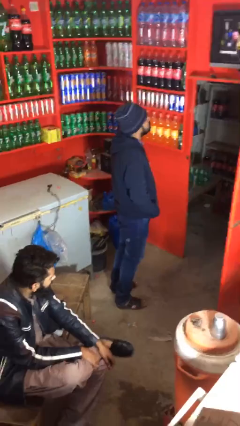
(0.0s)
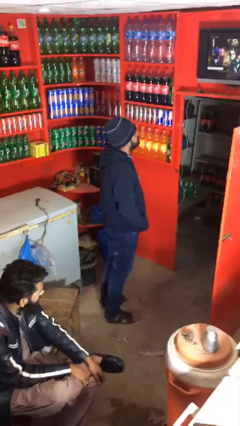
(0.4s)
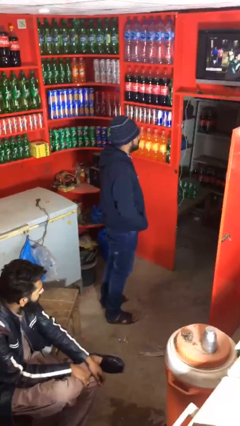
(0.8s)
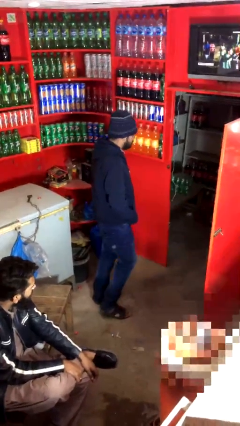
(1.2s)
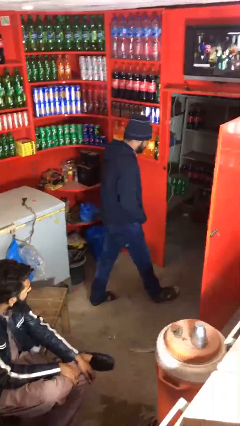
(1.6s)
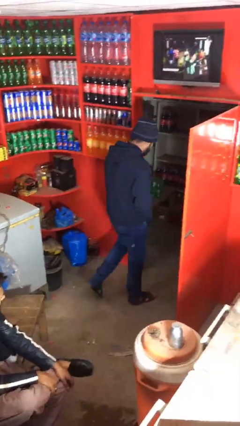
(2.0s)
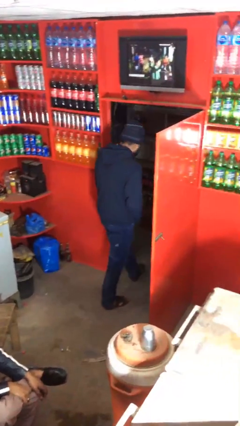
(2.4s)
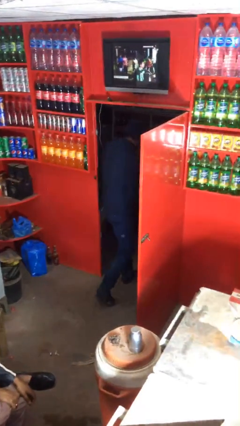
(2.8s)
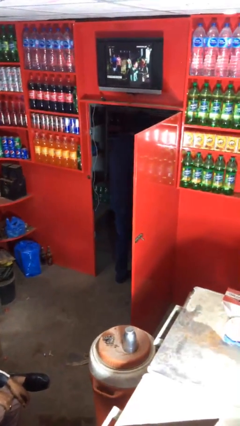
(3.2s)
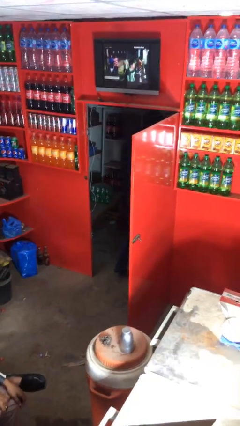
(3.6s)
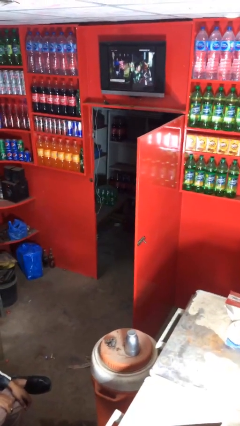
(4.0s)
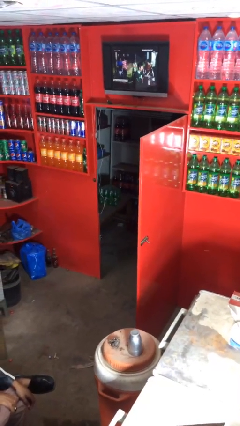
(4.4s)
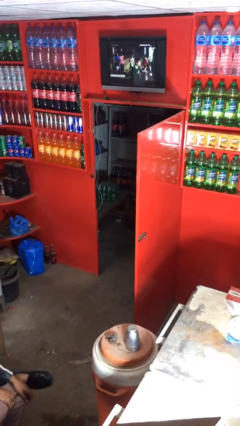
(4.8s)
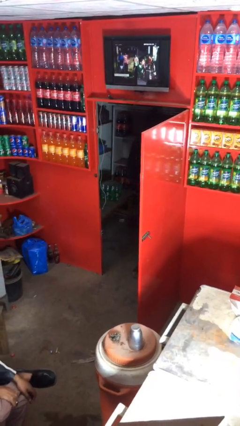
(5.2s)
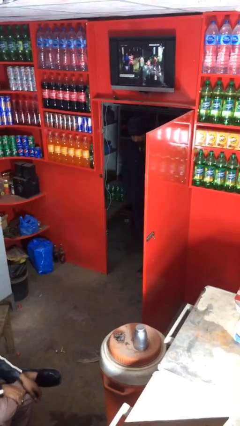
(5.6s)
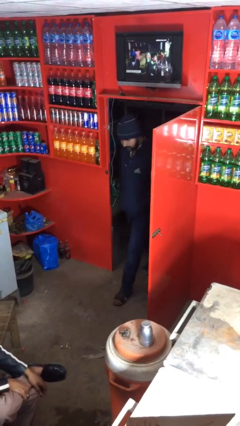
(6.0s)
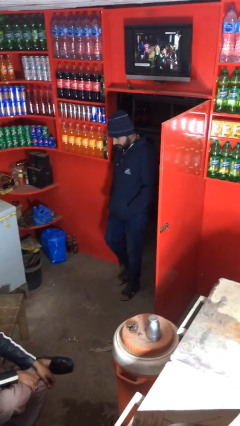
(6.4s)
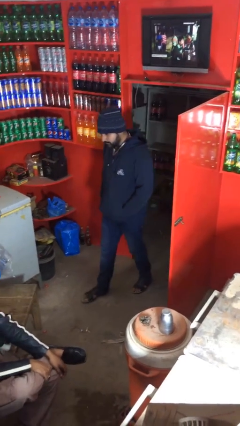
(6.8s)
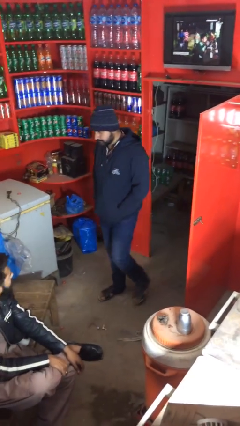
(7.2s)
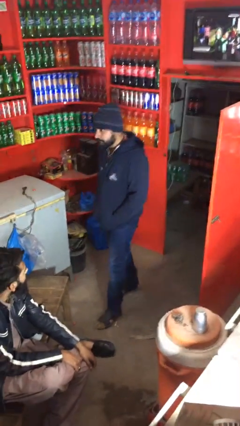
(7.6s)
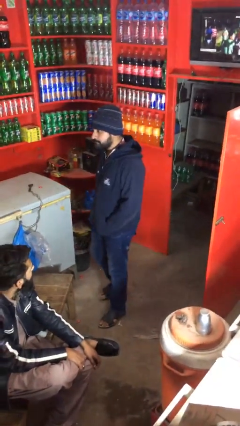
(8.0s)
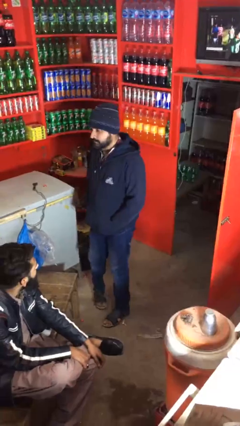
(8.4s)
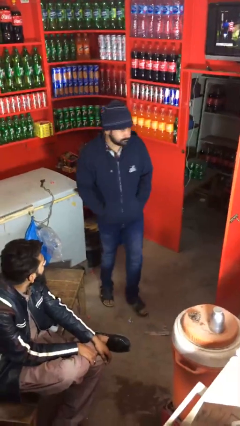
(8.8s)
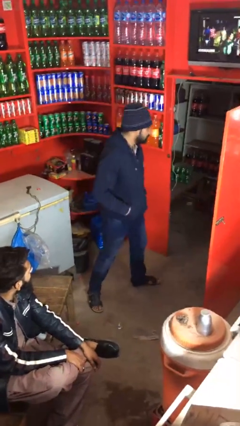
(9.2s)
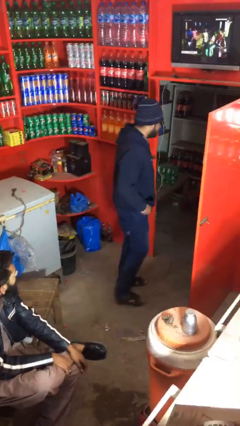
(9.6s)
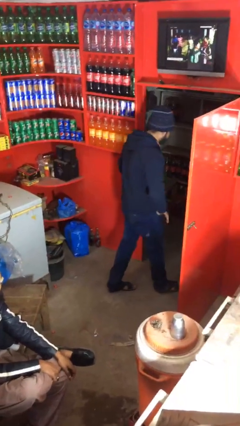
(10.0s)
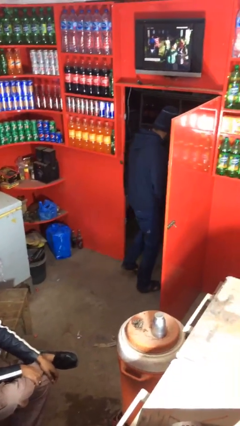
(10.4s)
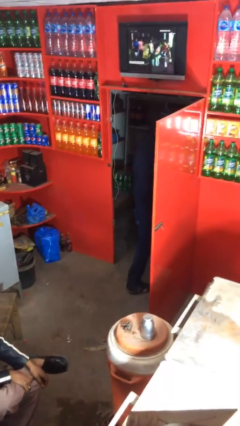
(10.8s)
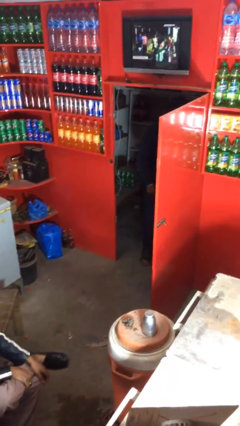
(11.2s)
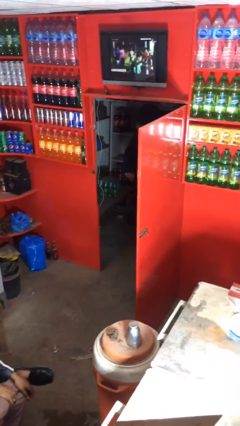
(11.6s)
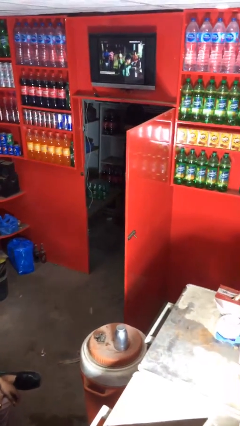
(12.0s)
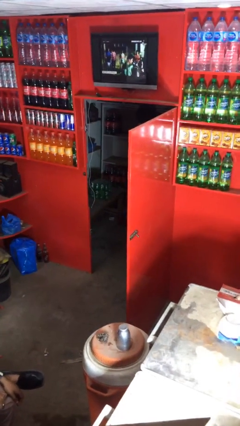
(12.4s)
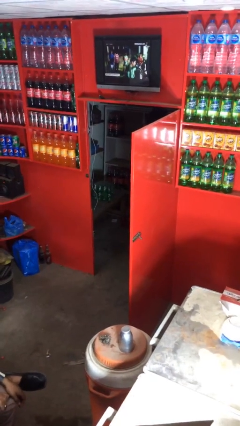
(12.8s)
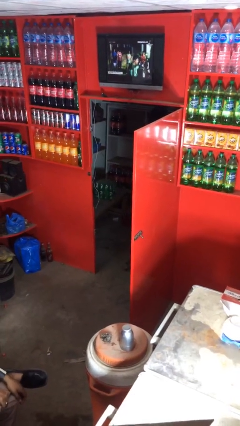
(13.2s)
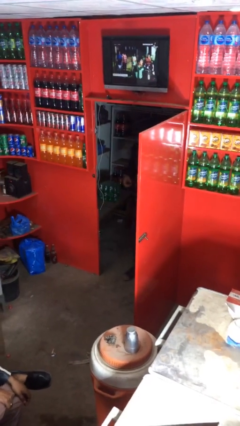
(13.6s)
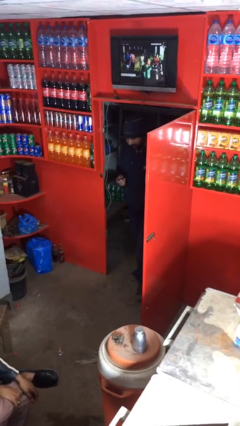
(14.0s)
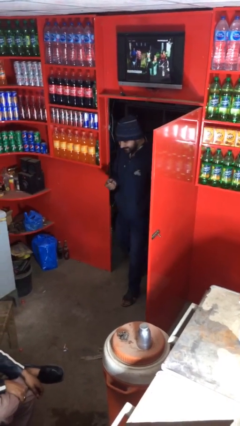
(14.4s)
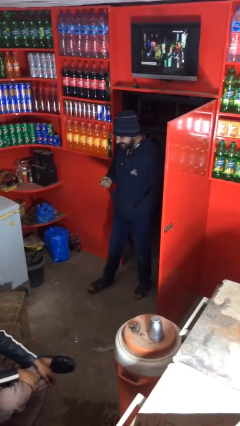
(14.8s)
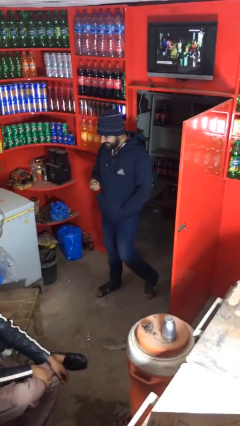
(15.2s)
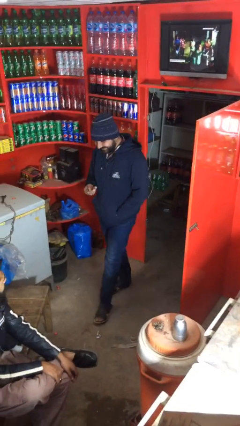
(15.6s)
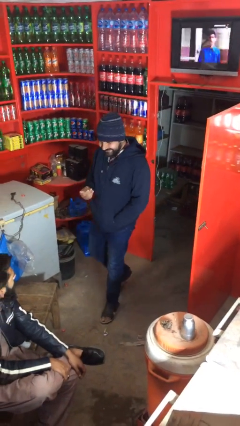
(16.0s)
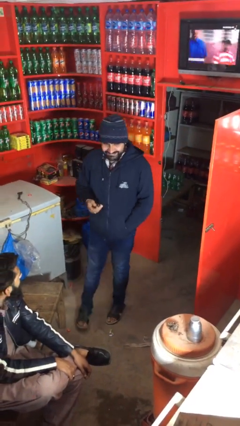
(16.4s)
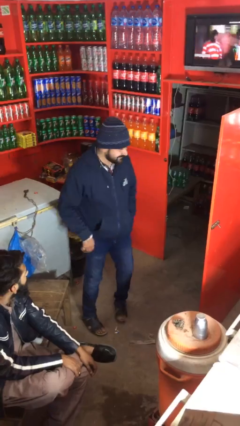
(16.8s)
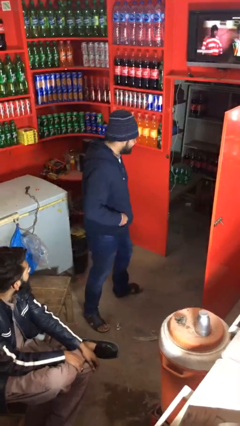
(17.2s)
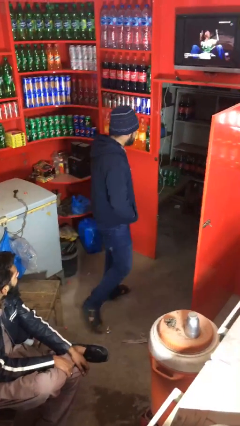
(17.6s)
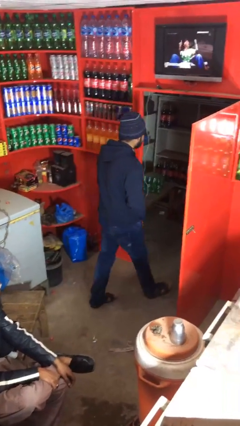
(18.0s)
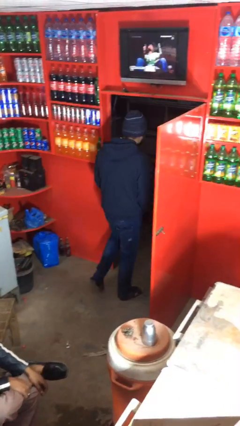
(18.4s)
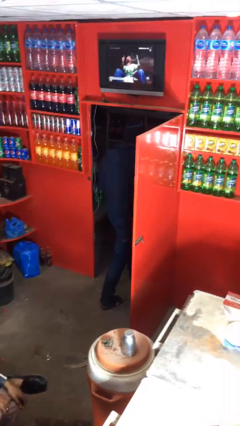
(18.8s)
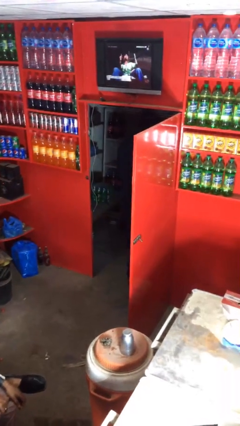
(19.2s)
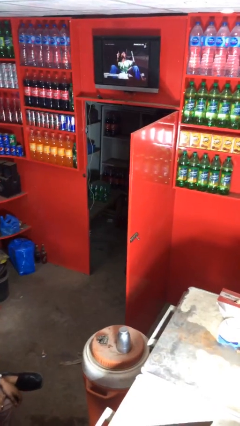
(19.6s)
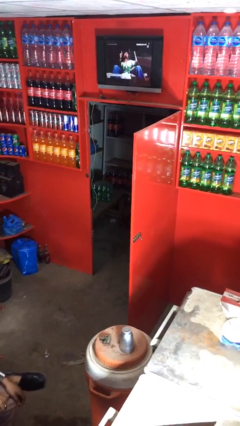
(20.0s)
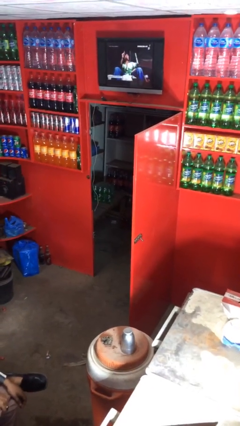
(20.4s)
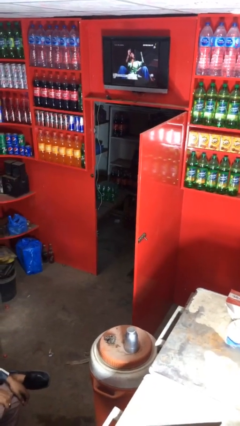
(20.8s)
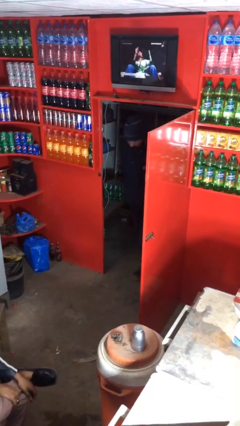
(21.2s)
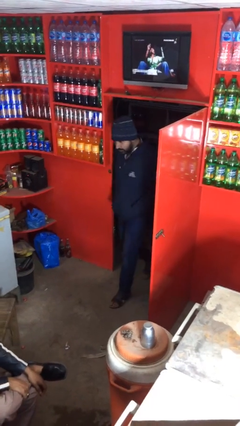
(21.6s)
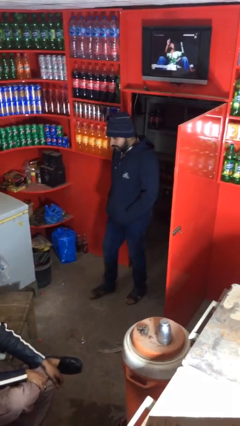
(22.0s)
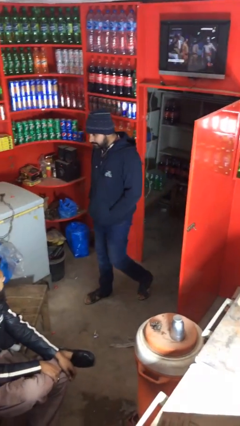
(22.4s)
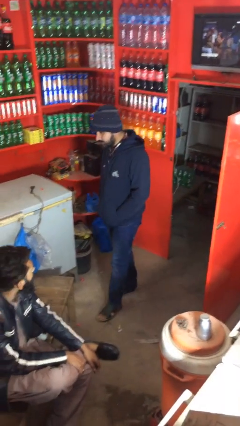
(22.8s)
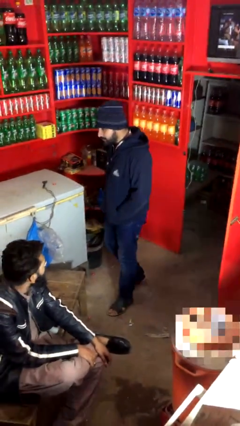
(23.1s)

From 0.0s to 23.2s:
person texts on phone

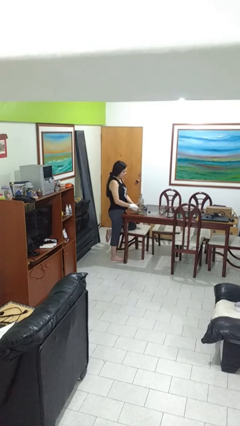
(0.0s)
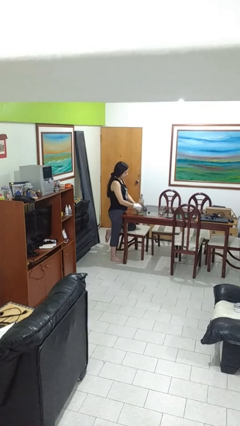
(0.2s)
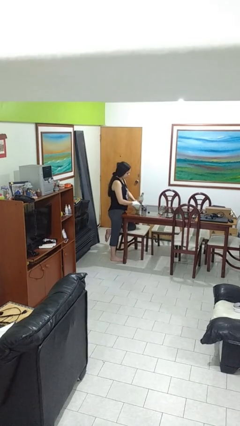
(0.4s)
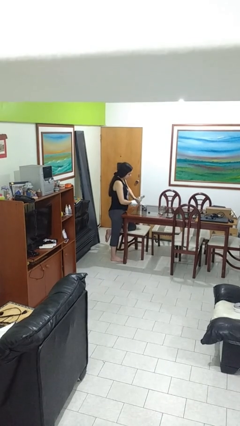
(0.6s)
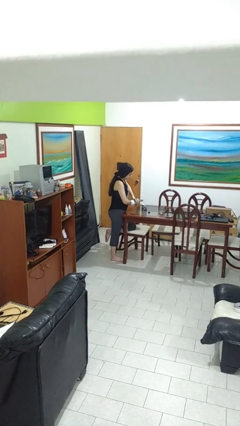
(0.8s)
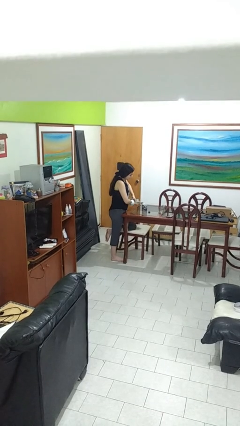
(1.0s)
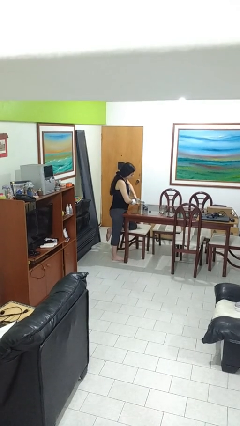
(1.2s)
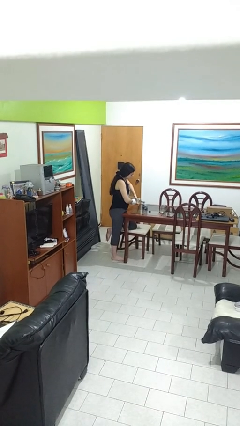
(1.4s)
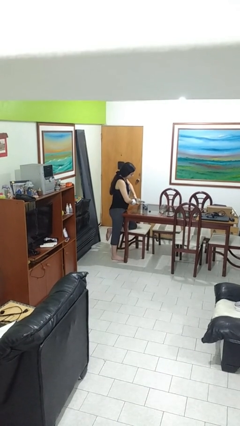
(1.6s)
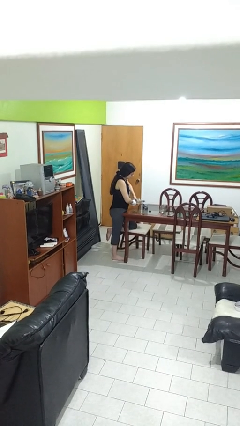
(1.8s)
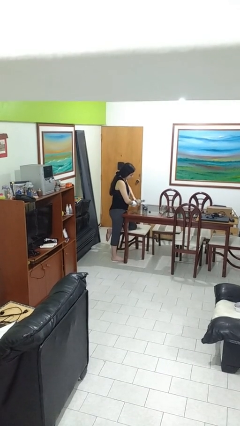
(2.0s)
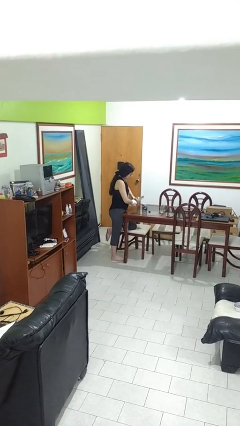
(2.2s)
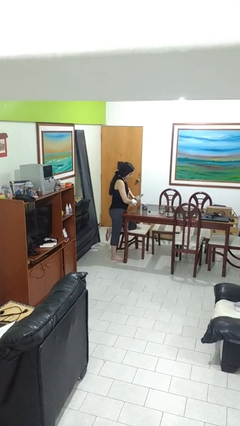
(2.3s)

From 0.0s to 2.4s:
person pours liquid into cup

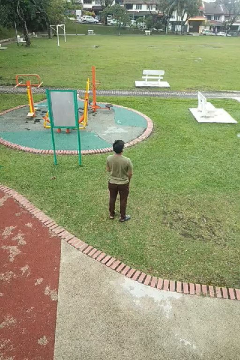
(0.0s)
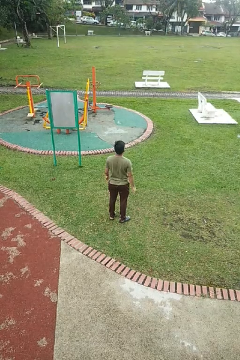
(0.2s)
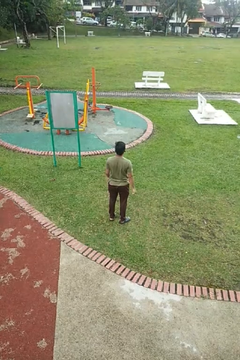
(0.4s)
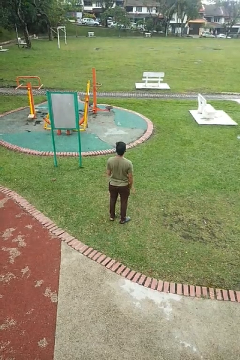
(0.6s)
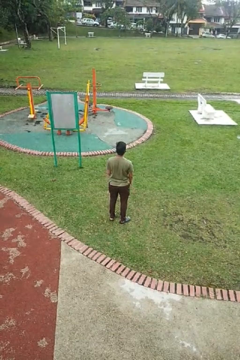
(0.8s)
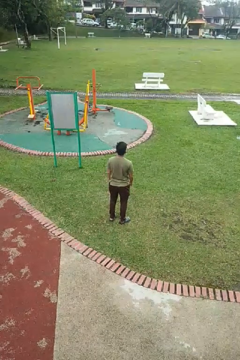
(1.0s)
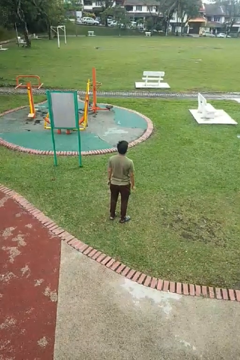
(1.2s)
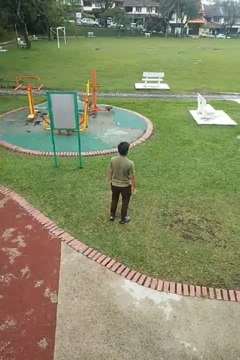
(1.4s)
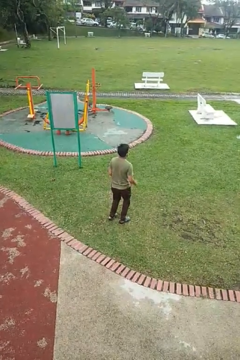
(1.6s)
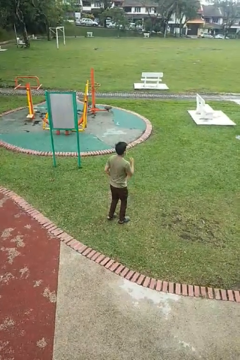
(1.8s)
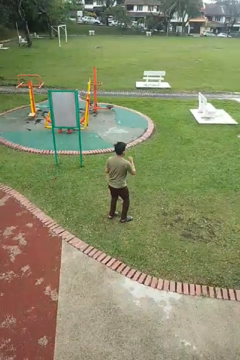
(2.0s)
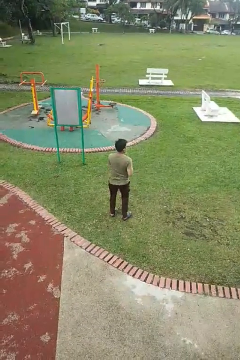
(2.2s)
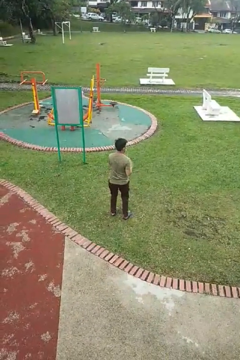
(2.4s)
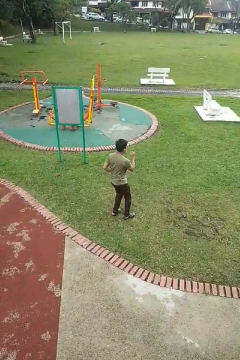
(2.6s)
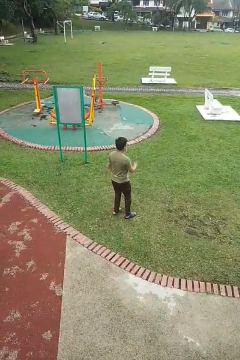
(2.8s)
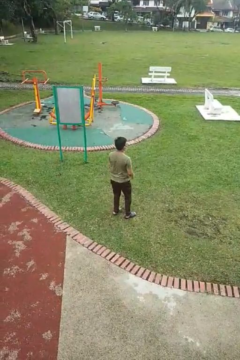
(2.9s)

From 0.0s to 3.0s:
person dances in place

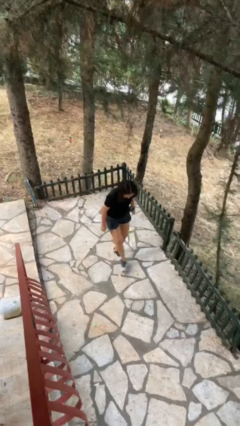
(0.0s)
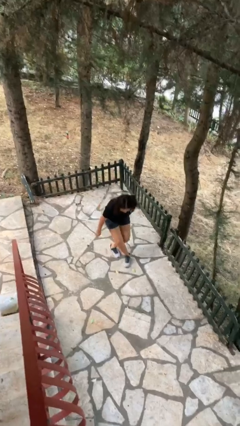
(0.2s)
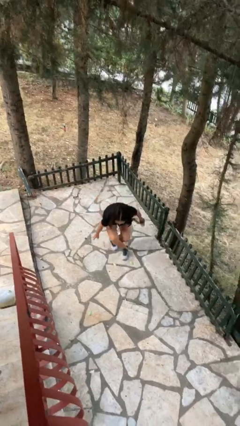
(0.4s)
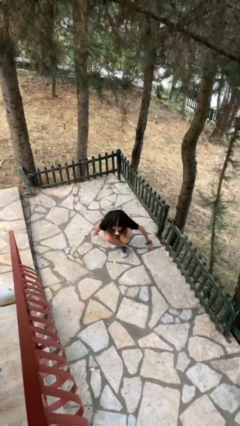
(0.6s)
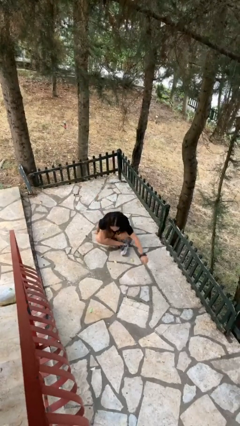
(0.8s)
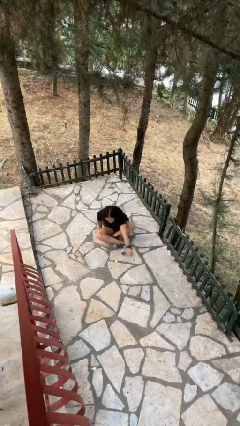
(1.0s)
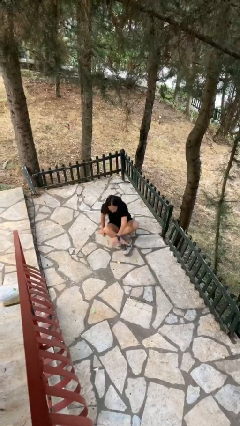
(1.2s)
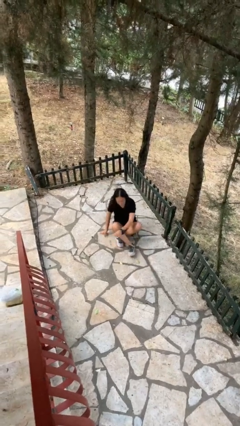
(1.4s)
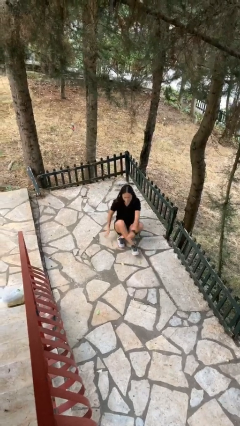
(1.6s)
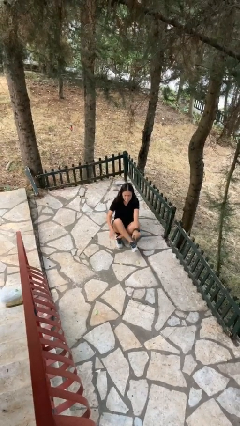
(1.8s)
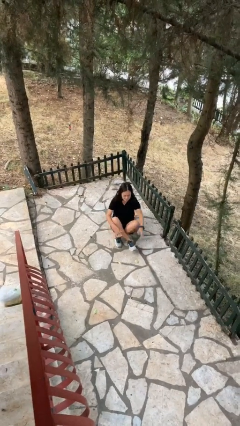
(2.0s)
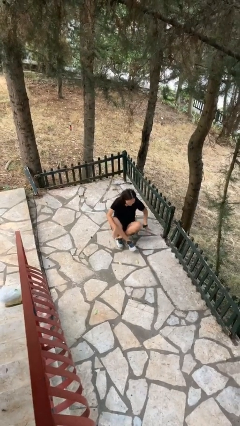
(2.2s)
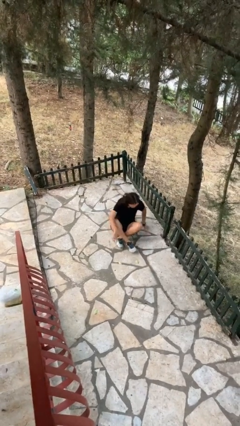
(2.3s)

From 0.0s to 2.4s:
person sits crisscross
